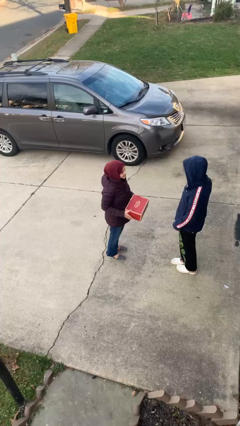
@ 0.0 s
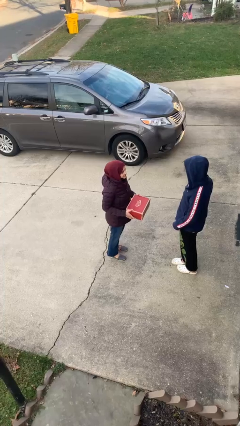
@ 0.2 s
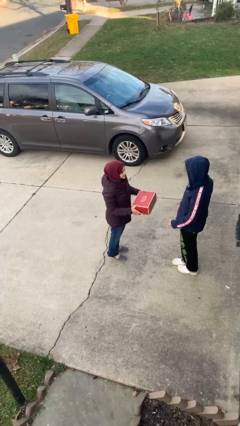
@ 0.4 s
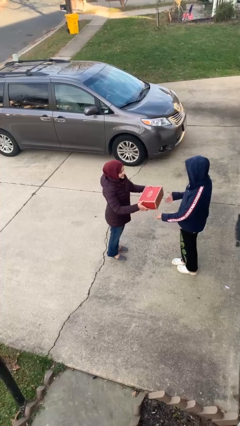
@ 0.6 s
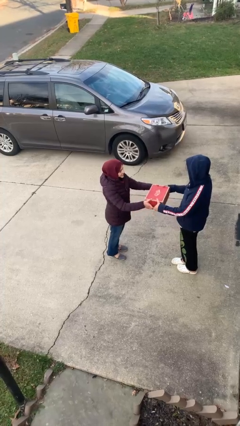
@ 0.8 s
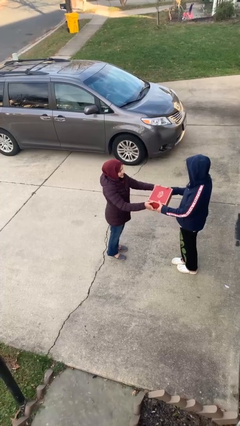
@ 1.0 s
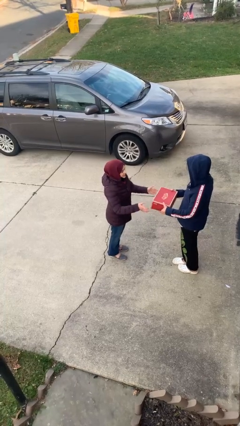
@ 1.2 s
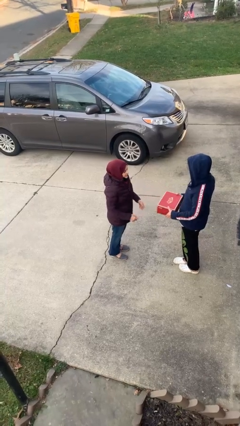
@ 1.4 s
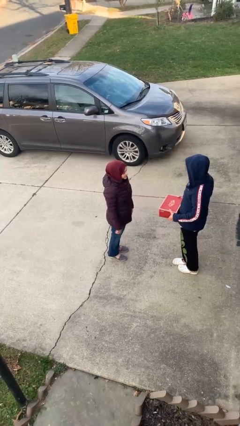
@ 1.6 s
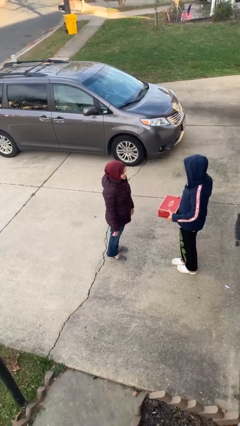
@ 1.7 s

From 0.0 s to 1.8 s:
person transfers object to person

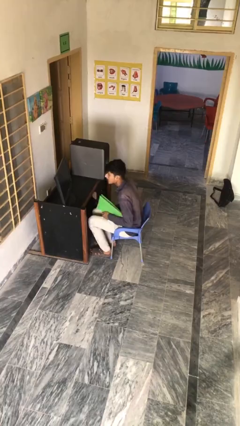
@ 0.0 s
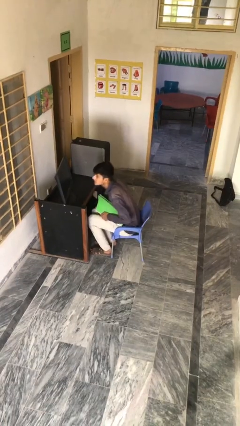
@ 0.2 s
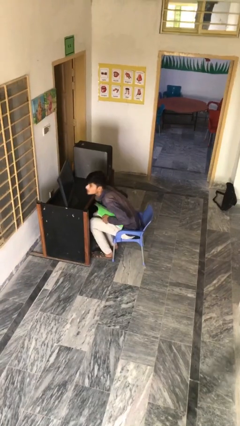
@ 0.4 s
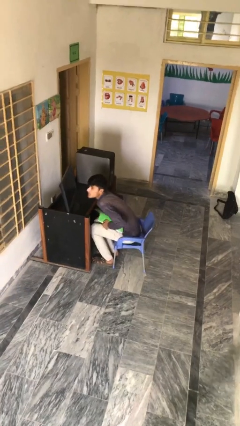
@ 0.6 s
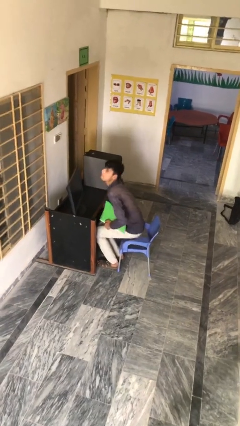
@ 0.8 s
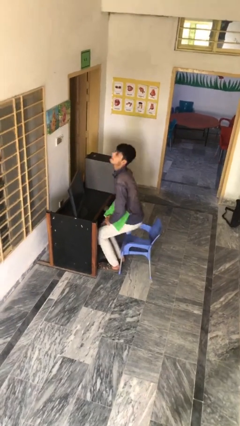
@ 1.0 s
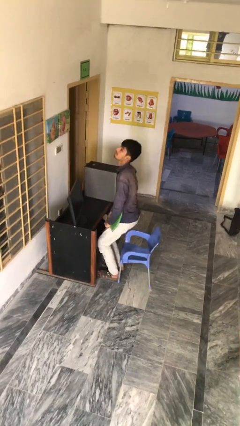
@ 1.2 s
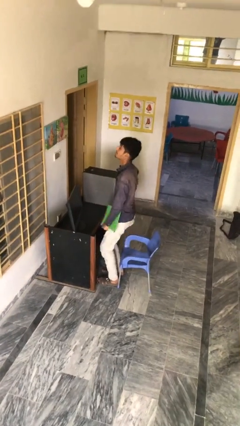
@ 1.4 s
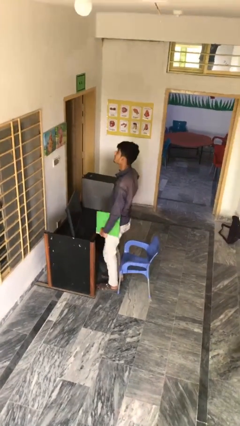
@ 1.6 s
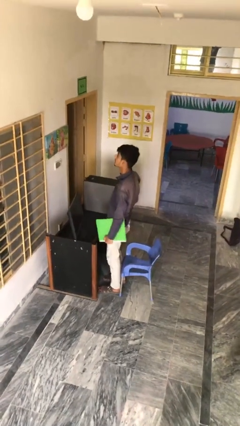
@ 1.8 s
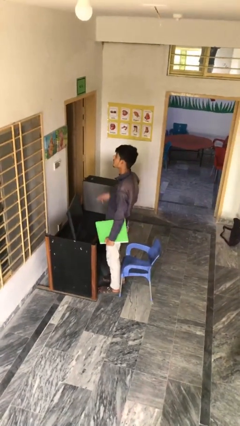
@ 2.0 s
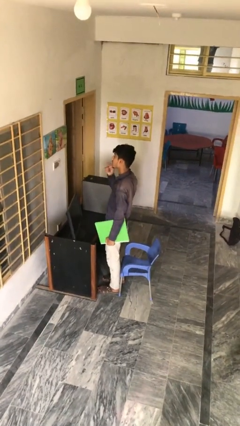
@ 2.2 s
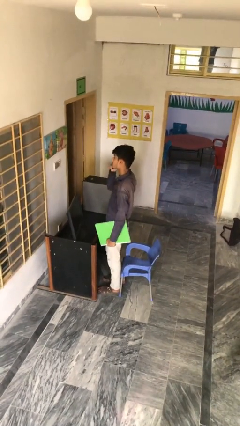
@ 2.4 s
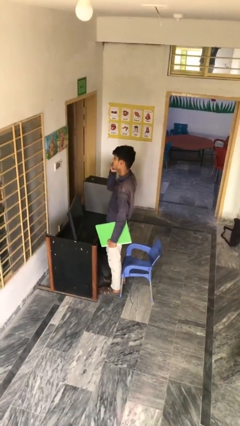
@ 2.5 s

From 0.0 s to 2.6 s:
person stands up

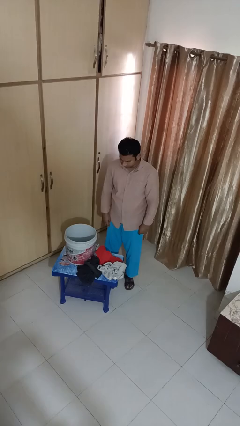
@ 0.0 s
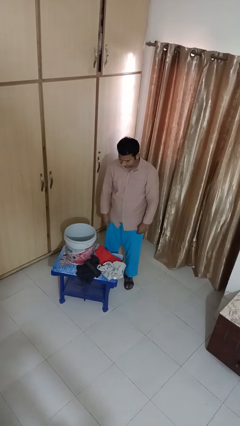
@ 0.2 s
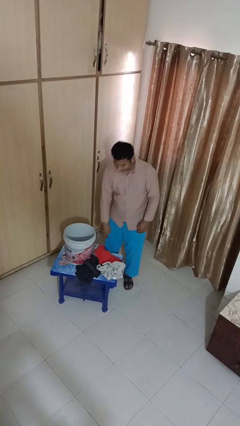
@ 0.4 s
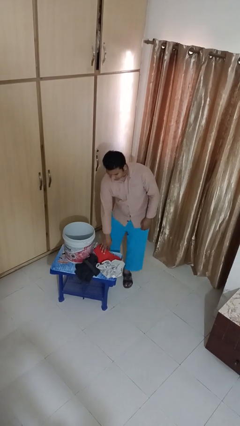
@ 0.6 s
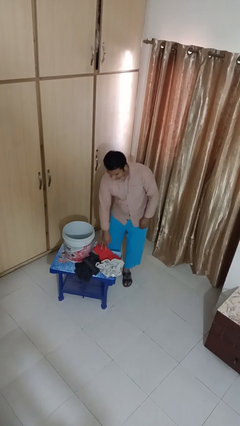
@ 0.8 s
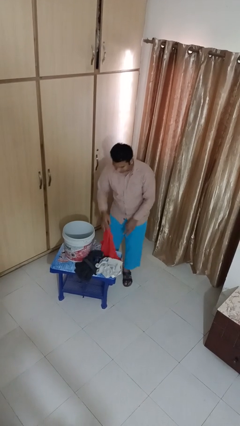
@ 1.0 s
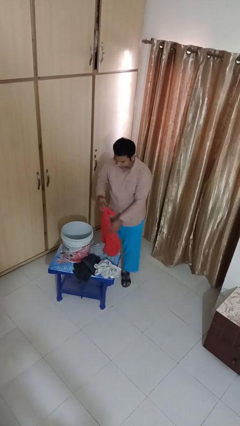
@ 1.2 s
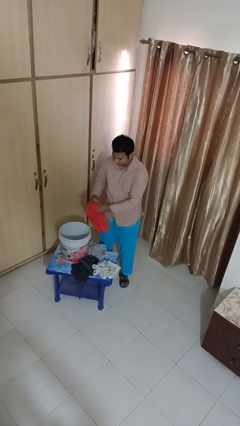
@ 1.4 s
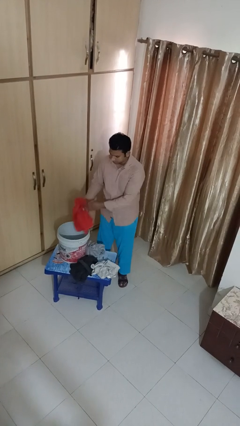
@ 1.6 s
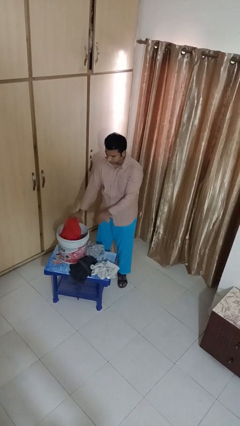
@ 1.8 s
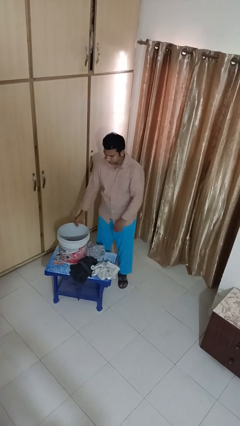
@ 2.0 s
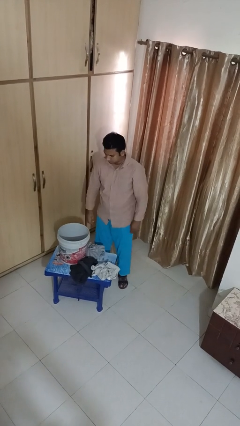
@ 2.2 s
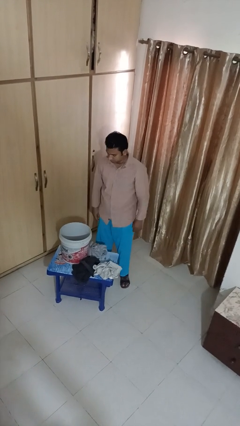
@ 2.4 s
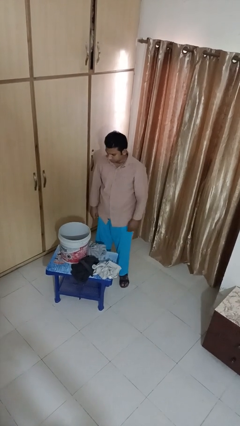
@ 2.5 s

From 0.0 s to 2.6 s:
person puts object into basket

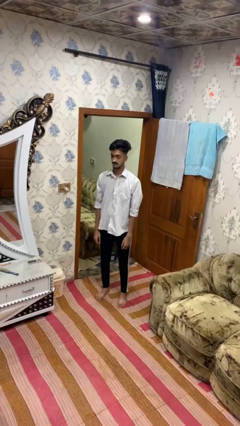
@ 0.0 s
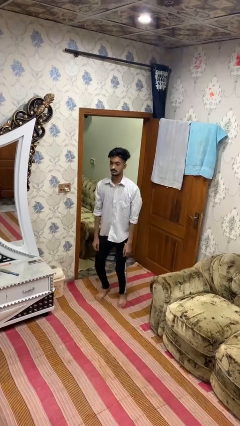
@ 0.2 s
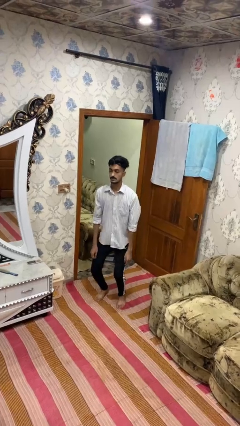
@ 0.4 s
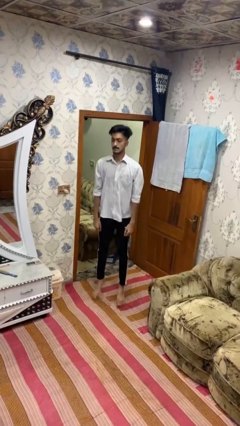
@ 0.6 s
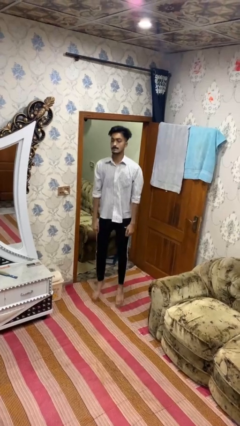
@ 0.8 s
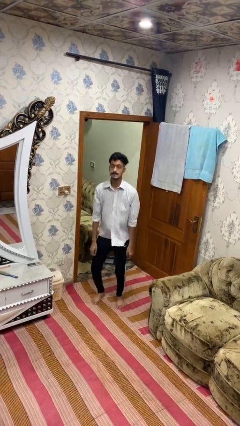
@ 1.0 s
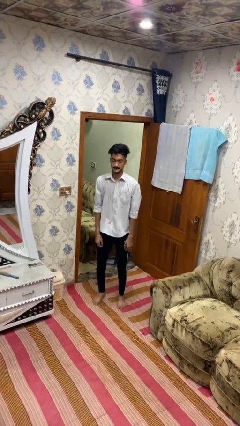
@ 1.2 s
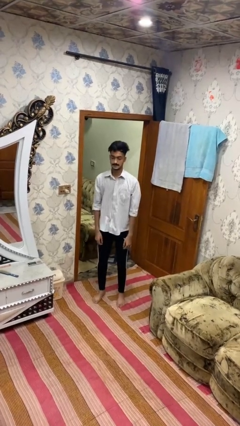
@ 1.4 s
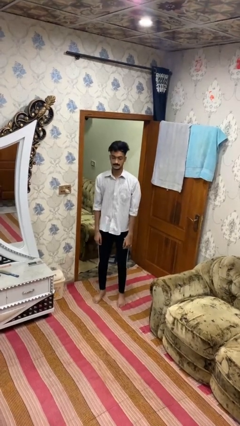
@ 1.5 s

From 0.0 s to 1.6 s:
person jumps

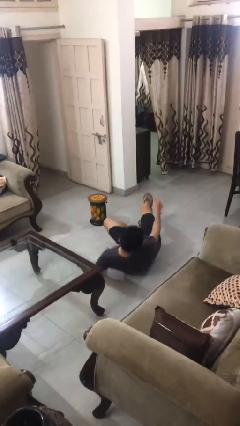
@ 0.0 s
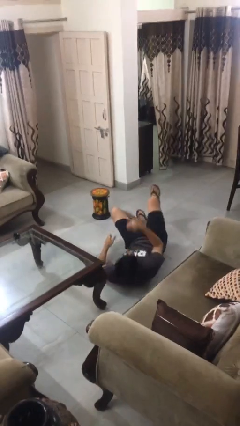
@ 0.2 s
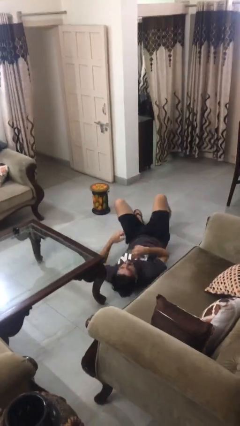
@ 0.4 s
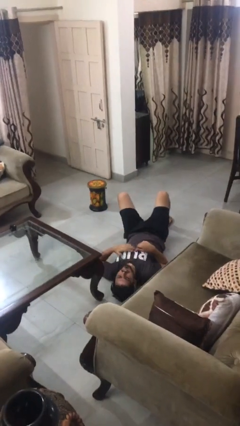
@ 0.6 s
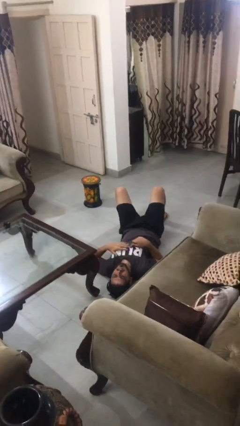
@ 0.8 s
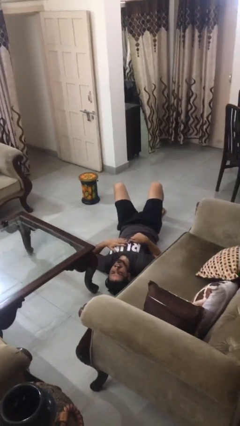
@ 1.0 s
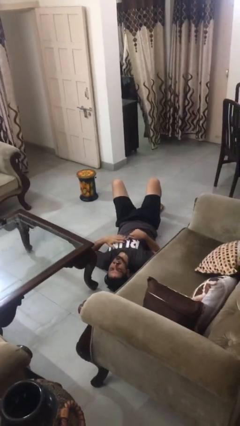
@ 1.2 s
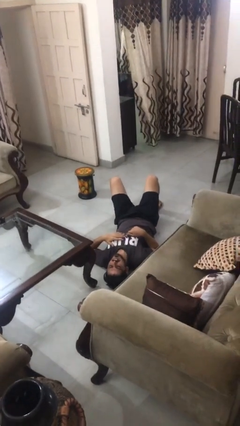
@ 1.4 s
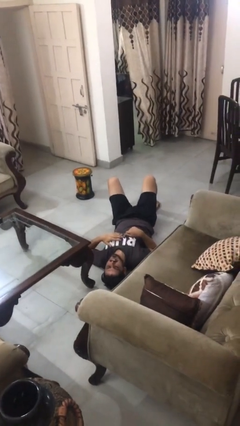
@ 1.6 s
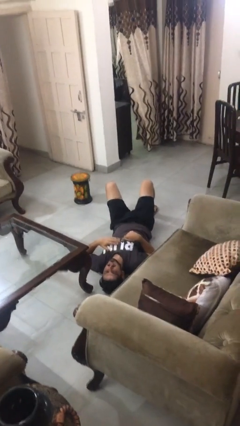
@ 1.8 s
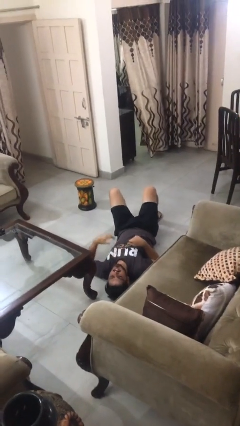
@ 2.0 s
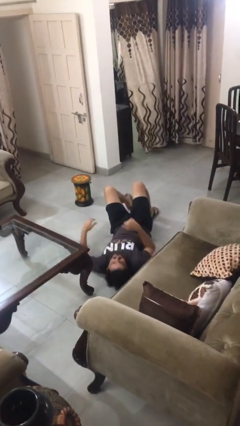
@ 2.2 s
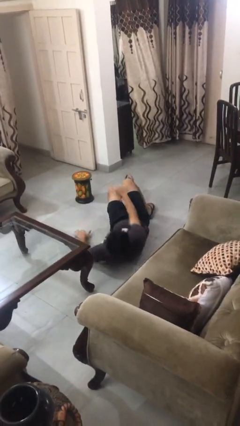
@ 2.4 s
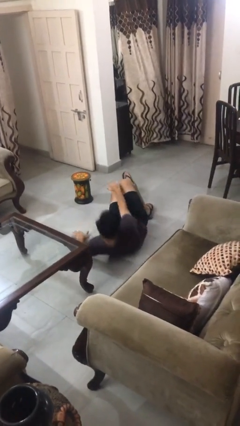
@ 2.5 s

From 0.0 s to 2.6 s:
person lies down on floor

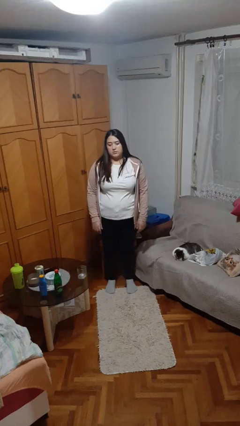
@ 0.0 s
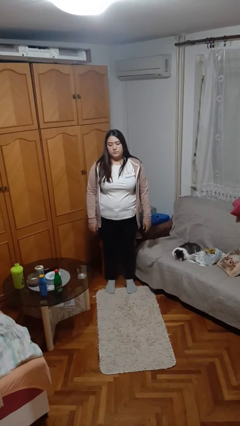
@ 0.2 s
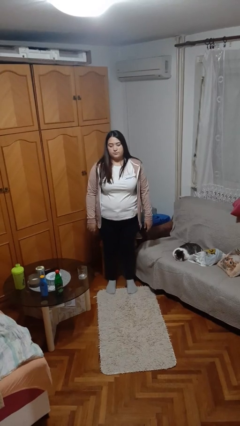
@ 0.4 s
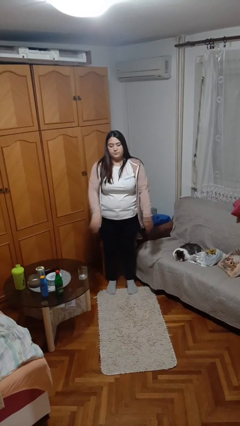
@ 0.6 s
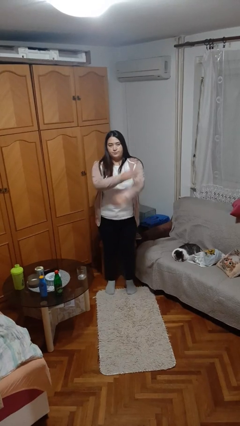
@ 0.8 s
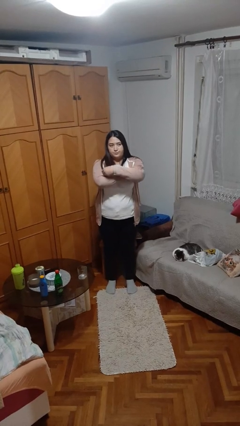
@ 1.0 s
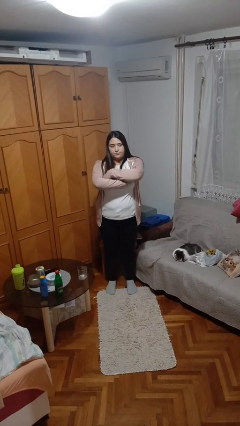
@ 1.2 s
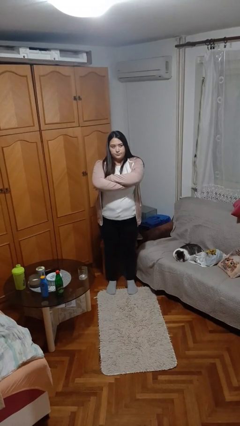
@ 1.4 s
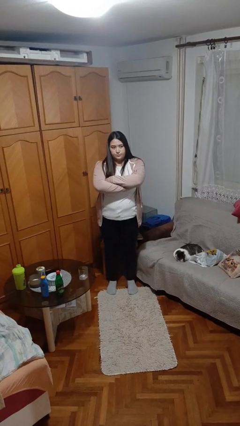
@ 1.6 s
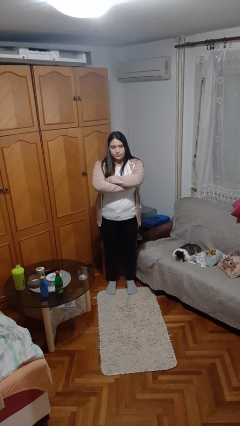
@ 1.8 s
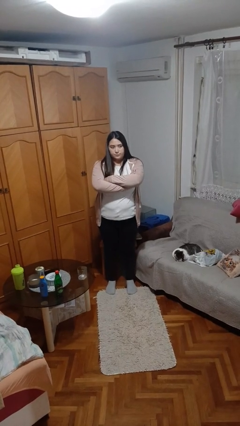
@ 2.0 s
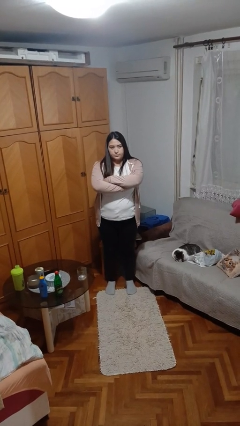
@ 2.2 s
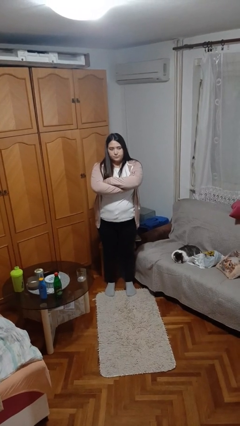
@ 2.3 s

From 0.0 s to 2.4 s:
person crosses arms

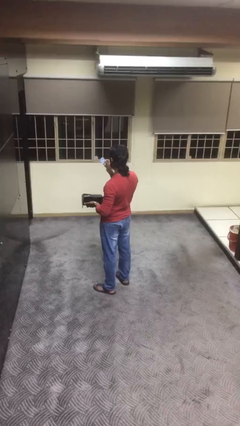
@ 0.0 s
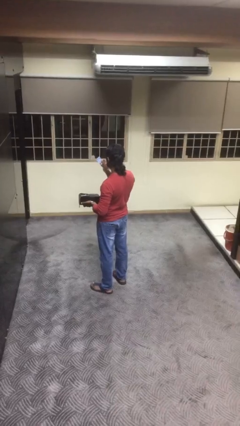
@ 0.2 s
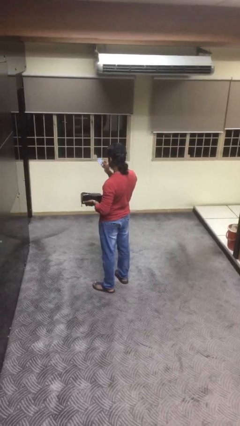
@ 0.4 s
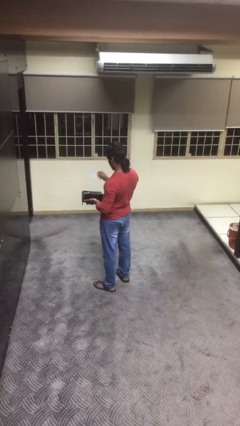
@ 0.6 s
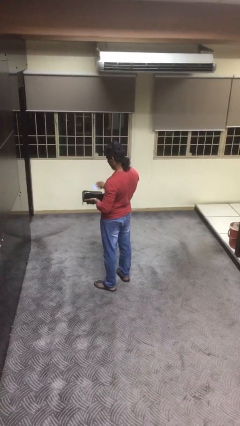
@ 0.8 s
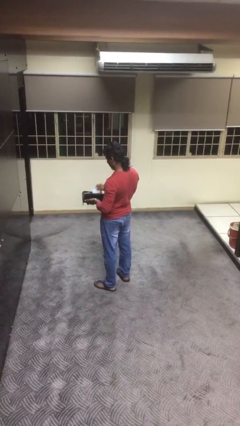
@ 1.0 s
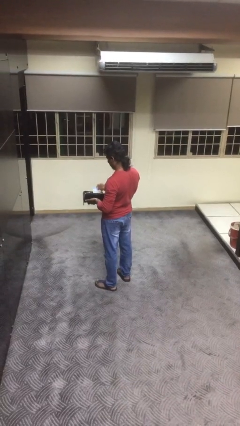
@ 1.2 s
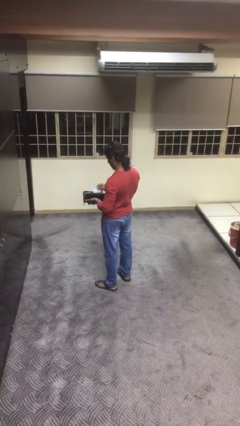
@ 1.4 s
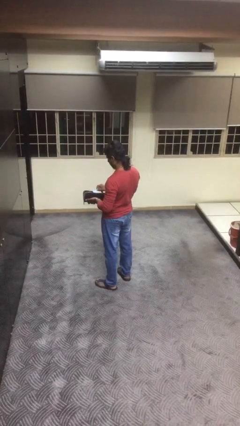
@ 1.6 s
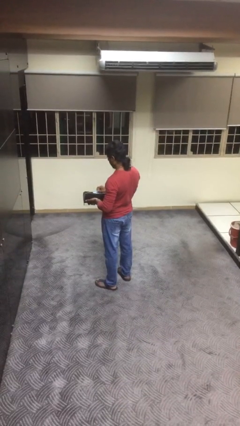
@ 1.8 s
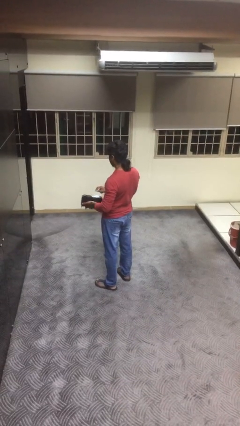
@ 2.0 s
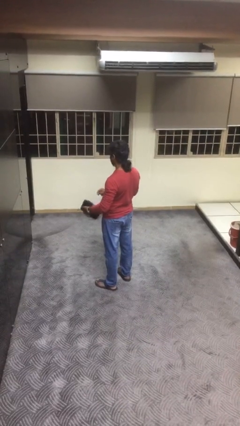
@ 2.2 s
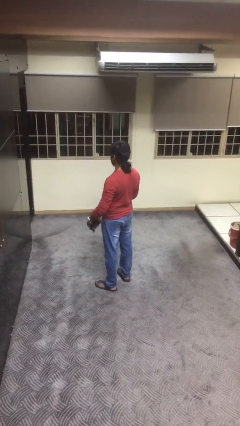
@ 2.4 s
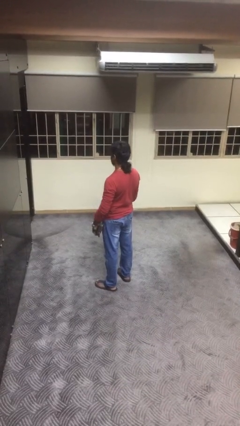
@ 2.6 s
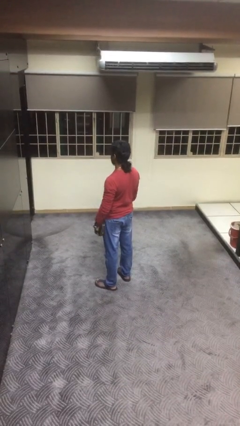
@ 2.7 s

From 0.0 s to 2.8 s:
person puts object into purse

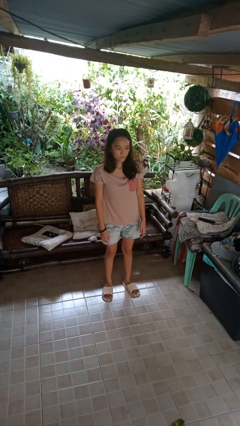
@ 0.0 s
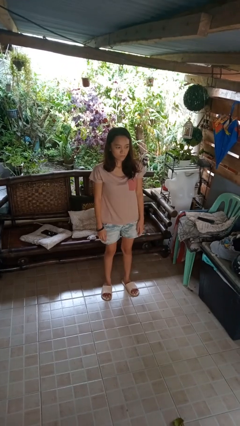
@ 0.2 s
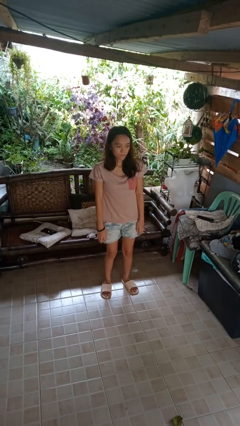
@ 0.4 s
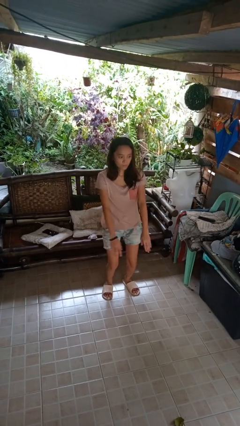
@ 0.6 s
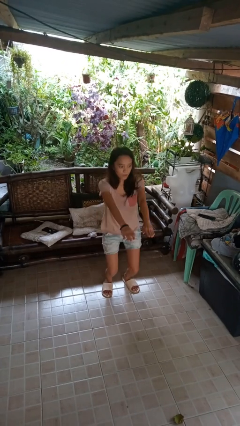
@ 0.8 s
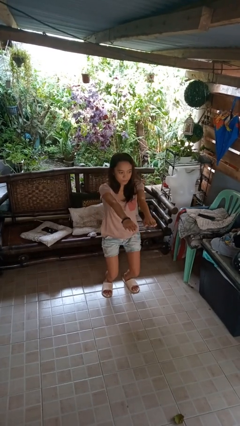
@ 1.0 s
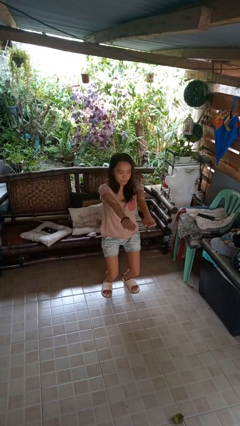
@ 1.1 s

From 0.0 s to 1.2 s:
person squats
